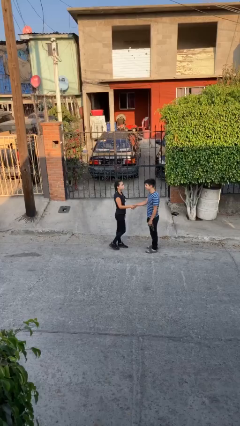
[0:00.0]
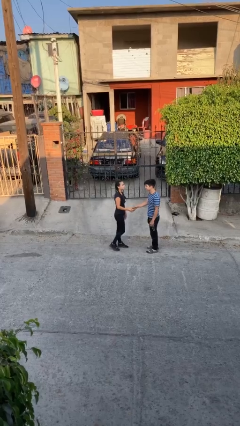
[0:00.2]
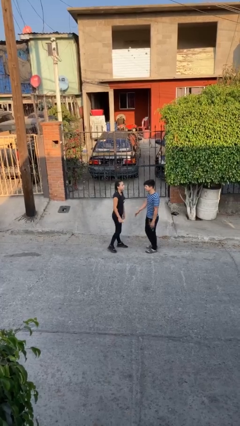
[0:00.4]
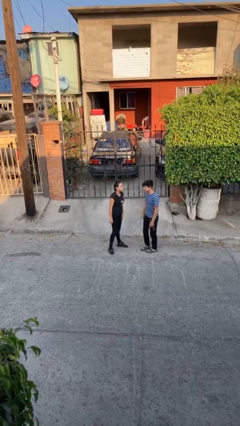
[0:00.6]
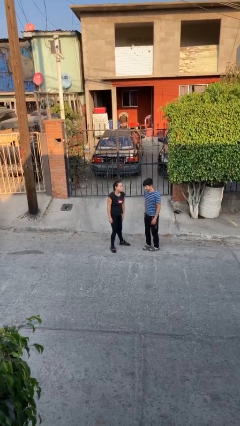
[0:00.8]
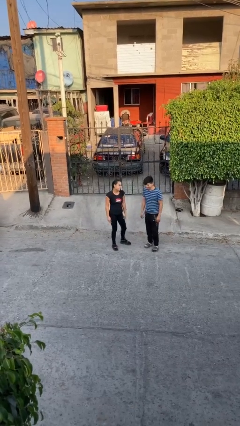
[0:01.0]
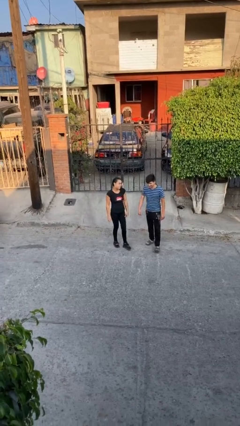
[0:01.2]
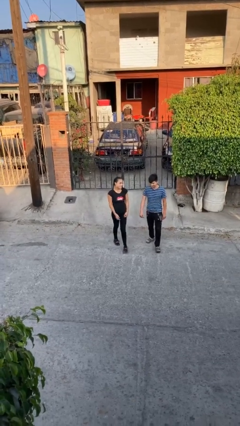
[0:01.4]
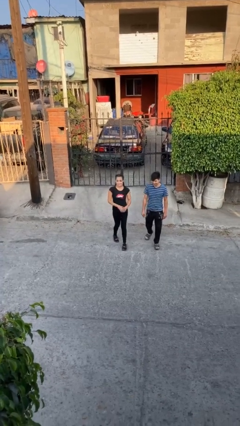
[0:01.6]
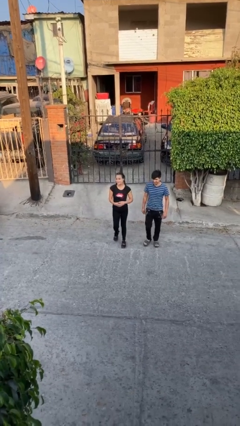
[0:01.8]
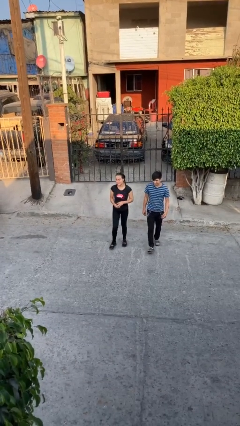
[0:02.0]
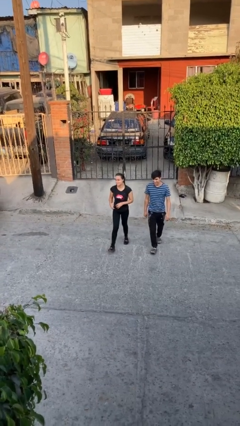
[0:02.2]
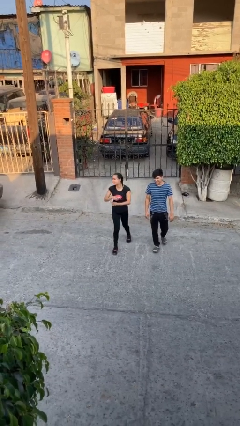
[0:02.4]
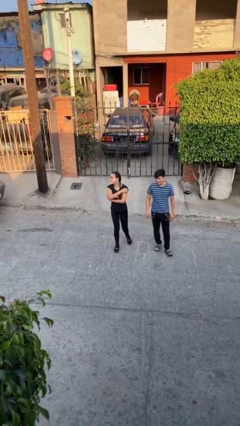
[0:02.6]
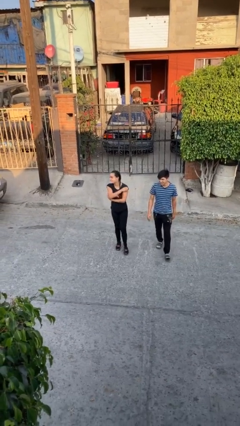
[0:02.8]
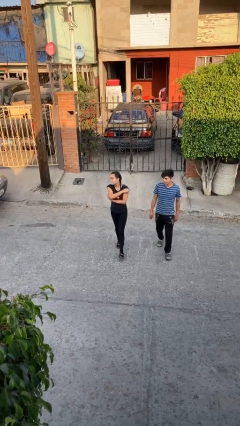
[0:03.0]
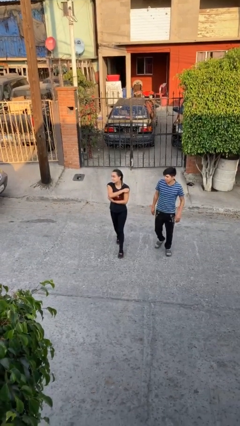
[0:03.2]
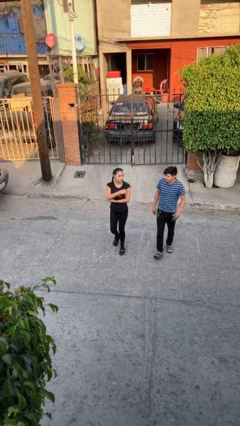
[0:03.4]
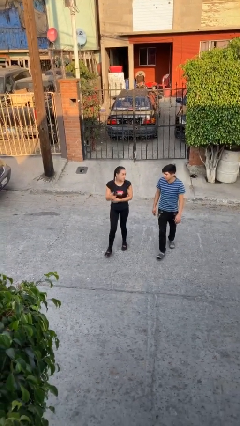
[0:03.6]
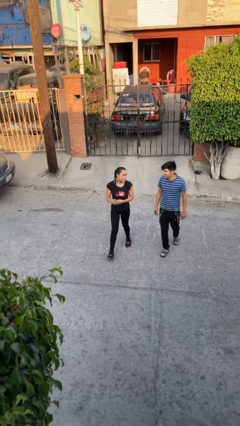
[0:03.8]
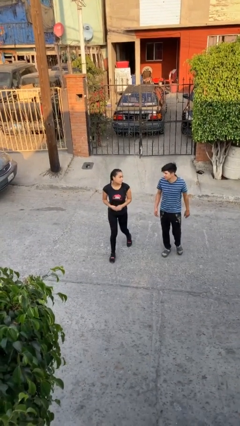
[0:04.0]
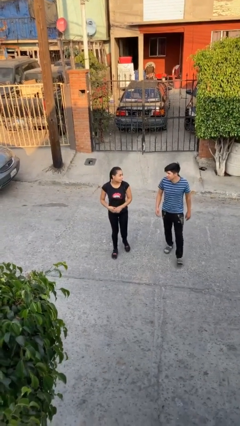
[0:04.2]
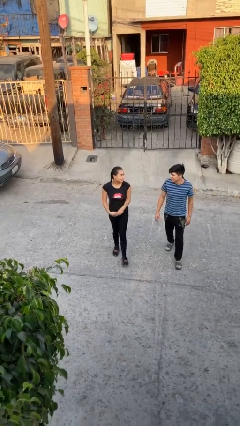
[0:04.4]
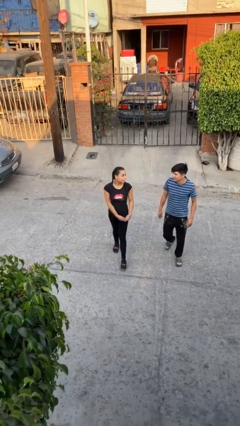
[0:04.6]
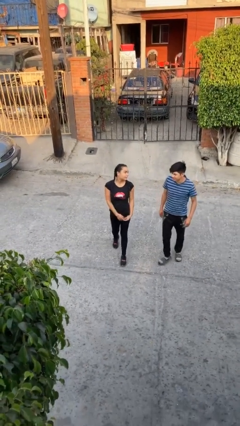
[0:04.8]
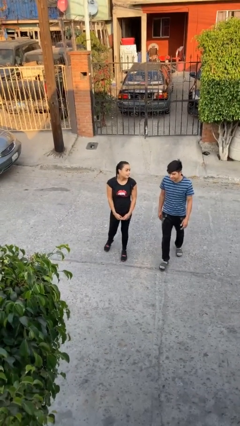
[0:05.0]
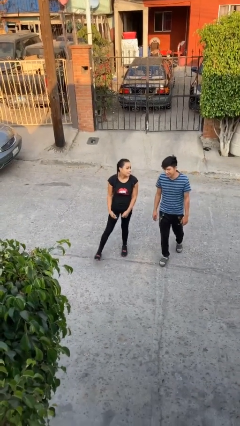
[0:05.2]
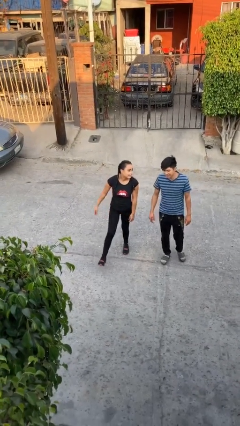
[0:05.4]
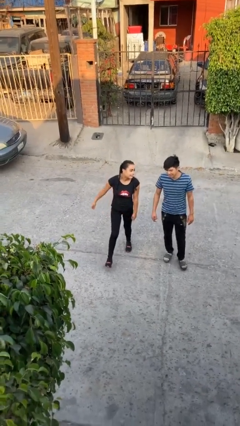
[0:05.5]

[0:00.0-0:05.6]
person talks to person

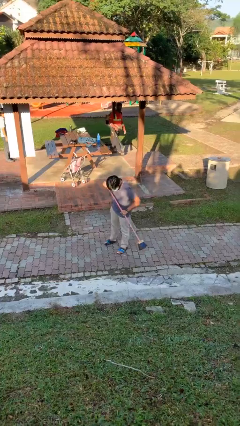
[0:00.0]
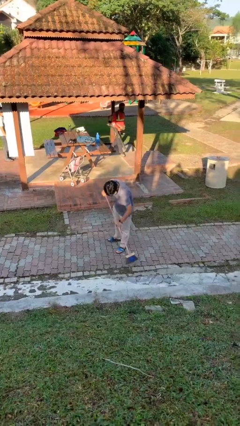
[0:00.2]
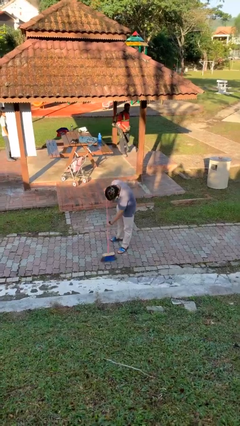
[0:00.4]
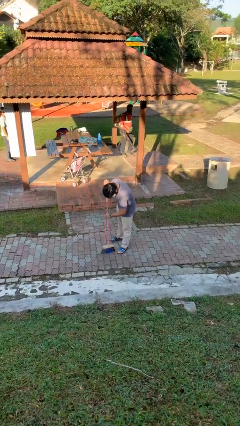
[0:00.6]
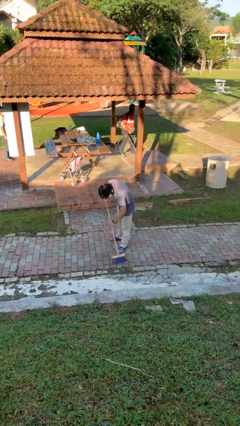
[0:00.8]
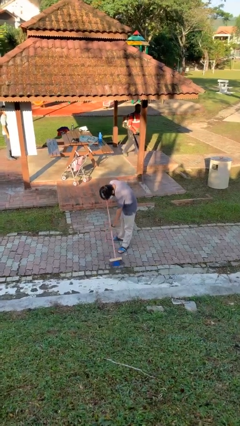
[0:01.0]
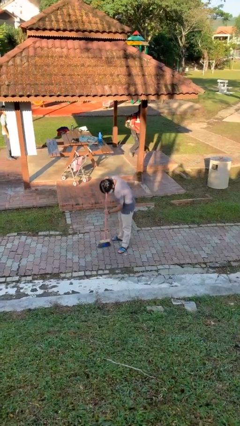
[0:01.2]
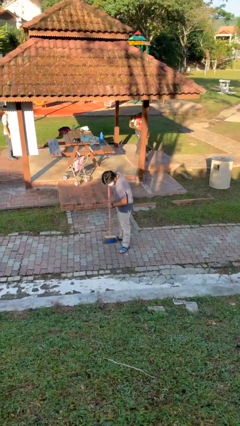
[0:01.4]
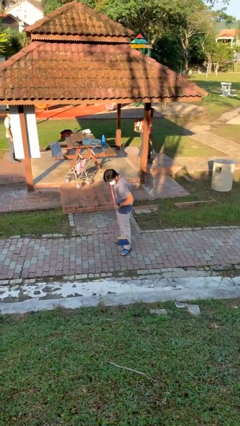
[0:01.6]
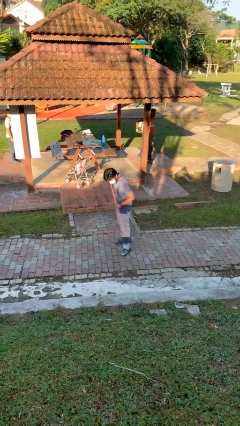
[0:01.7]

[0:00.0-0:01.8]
person sweeps floor

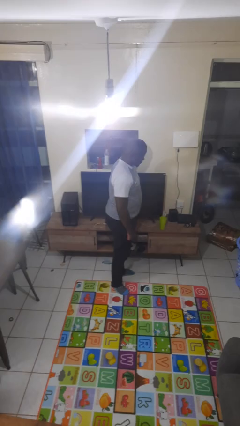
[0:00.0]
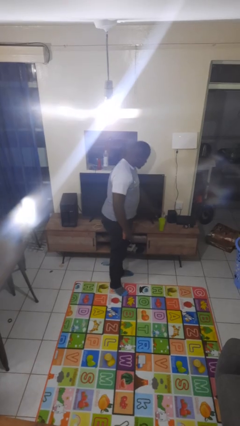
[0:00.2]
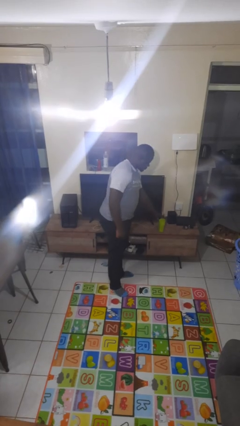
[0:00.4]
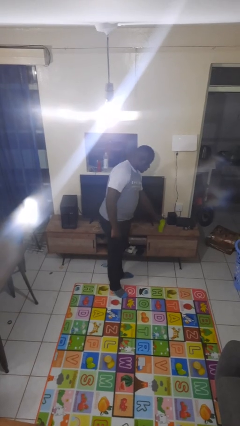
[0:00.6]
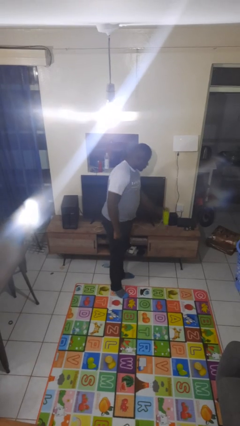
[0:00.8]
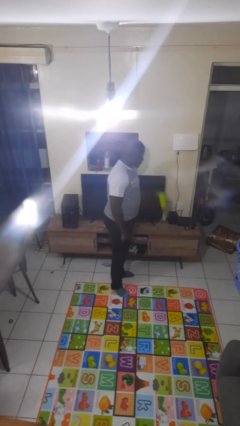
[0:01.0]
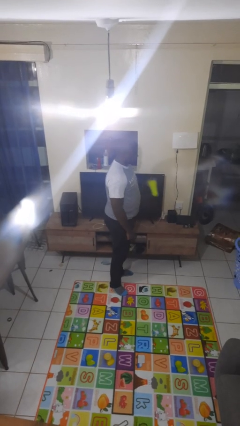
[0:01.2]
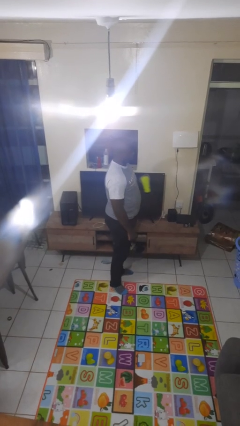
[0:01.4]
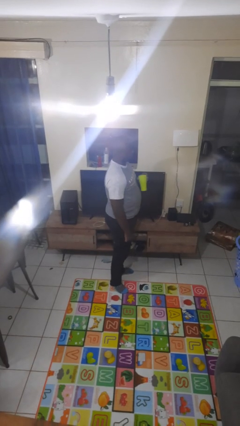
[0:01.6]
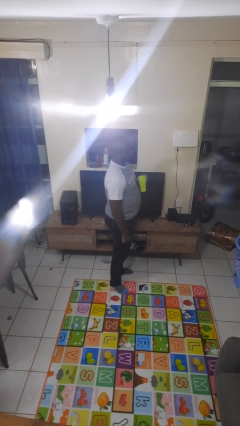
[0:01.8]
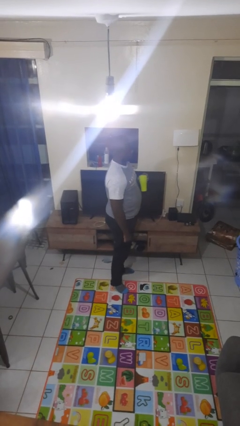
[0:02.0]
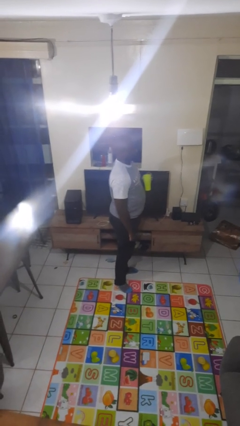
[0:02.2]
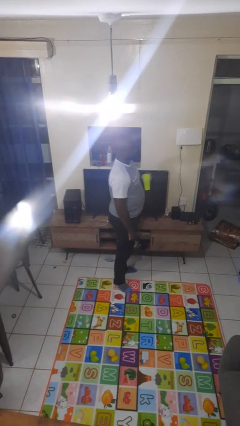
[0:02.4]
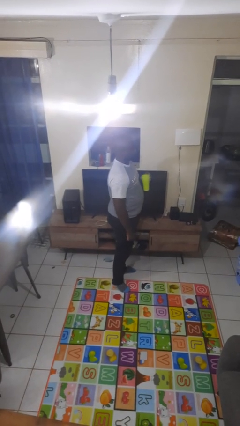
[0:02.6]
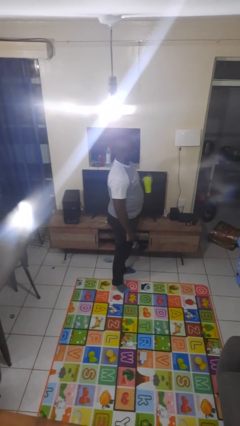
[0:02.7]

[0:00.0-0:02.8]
person picks up object from countertop

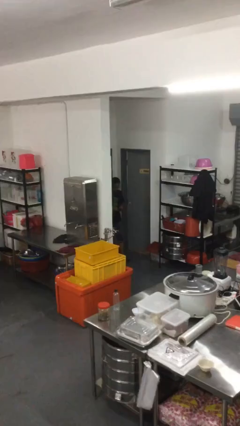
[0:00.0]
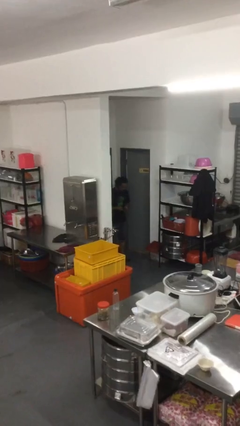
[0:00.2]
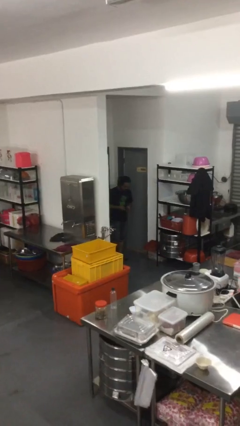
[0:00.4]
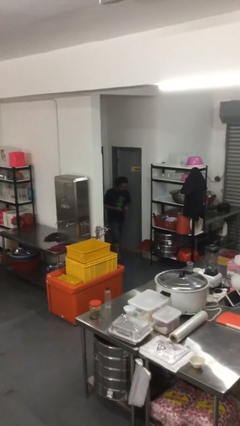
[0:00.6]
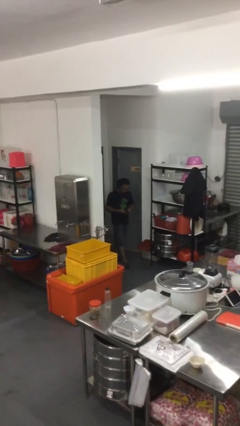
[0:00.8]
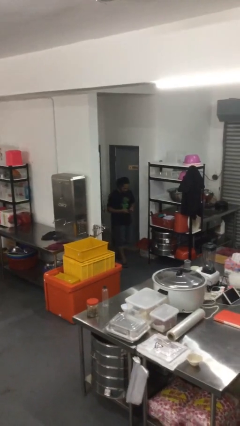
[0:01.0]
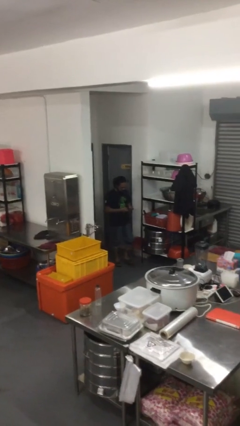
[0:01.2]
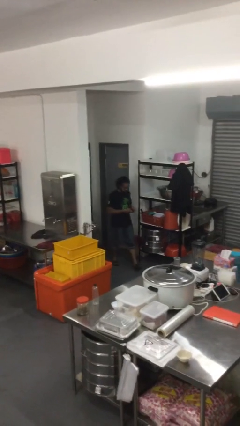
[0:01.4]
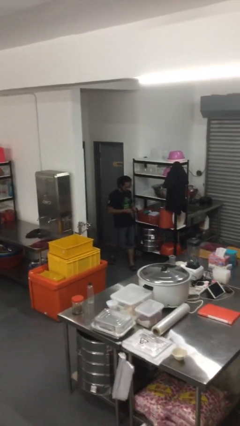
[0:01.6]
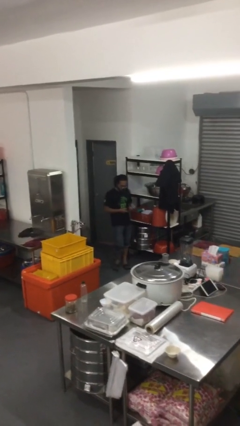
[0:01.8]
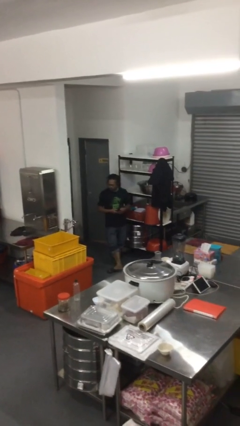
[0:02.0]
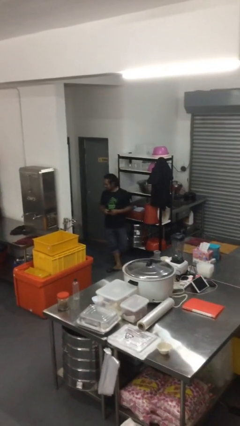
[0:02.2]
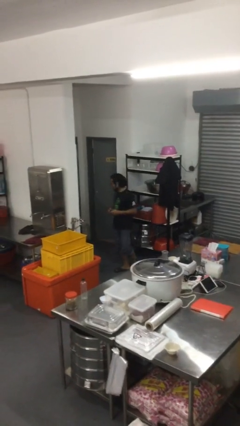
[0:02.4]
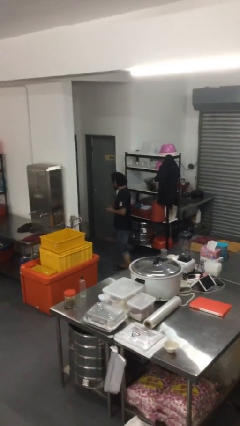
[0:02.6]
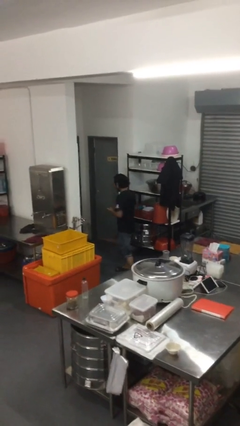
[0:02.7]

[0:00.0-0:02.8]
person enters scene through structure

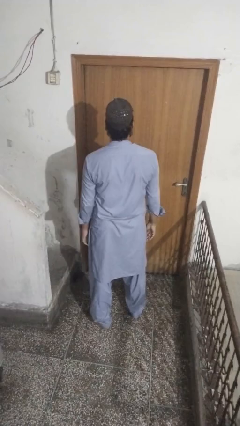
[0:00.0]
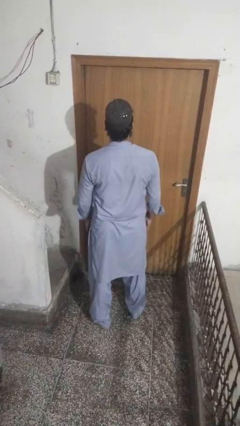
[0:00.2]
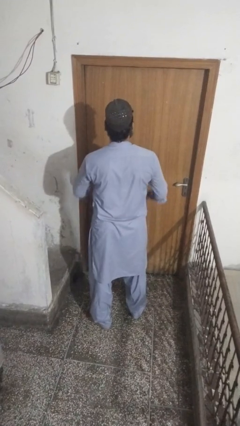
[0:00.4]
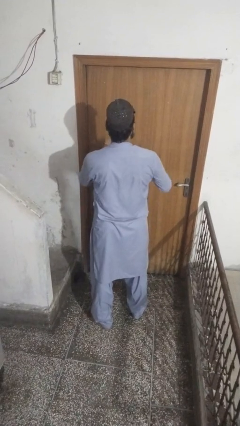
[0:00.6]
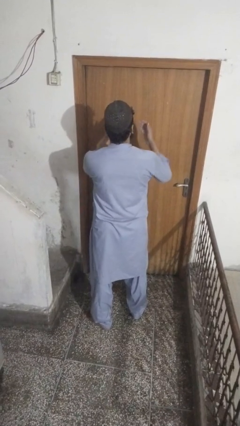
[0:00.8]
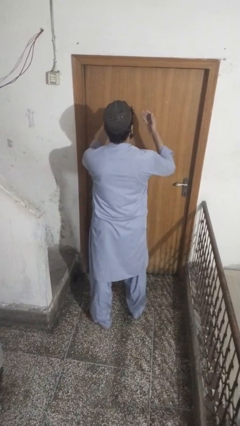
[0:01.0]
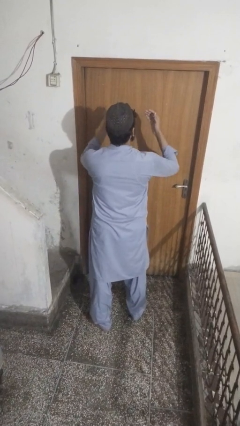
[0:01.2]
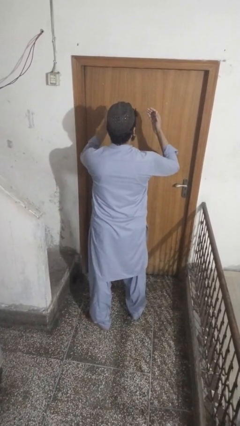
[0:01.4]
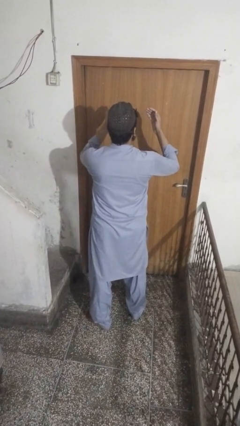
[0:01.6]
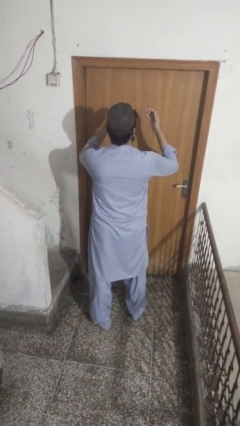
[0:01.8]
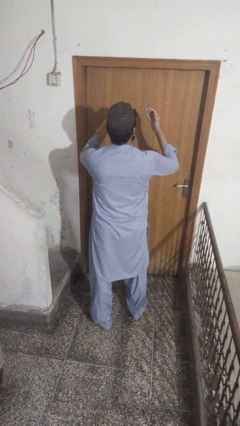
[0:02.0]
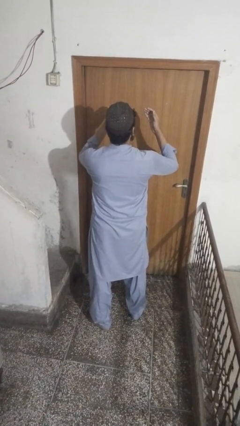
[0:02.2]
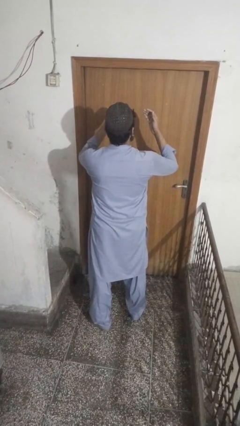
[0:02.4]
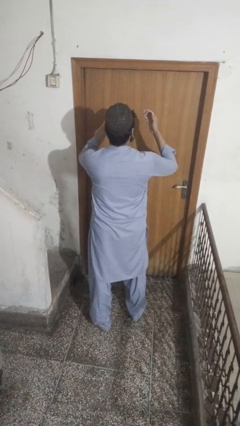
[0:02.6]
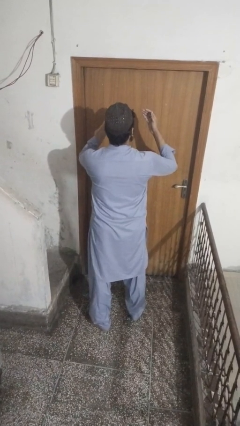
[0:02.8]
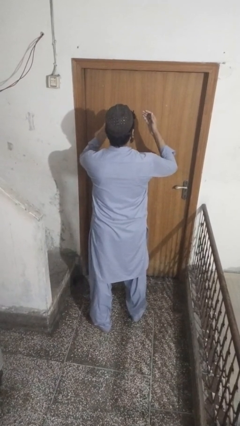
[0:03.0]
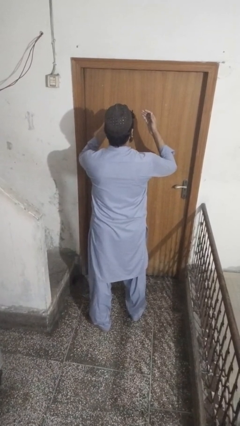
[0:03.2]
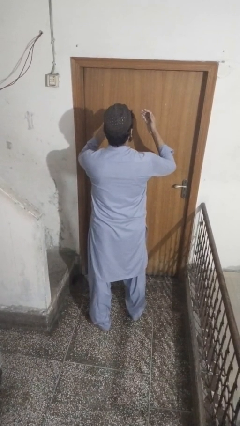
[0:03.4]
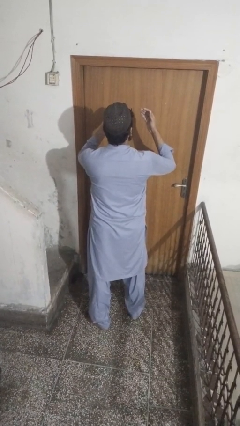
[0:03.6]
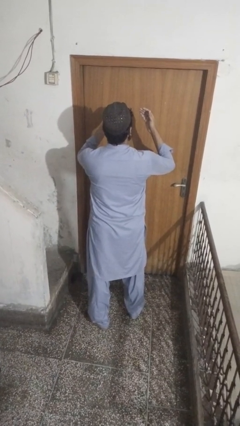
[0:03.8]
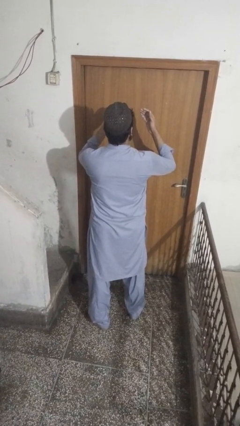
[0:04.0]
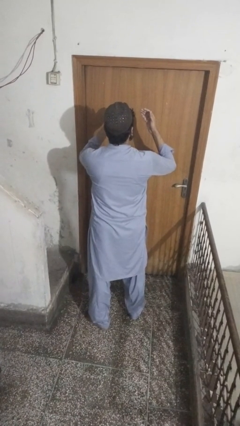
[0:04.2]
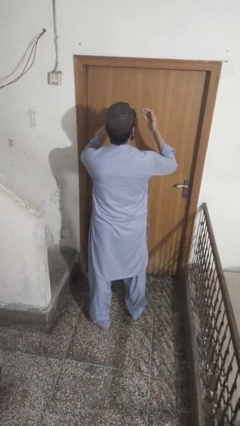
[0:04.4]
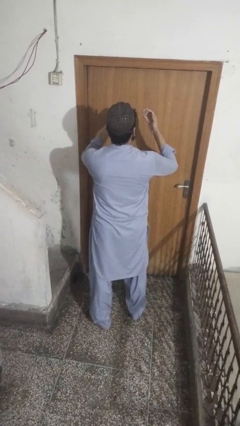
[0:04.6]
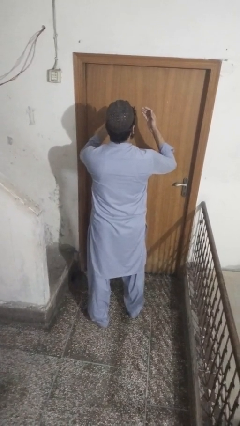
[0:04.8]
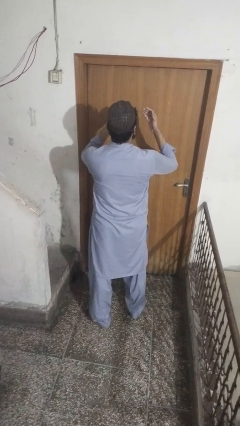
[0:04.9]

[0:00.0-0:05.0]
person prays
